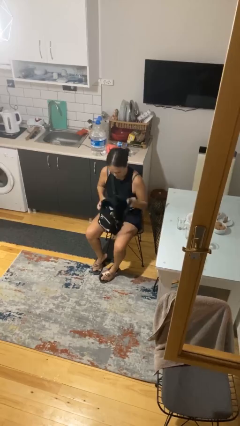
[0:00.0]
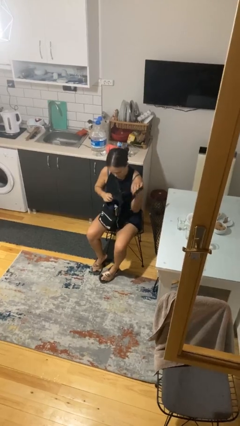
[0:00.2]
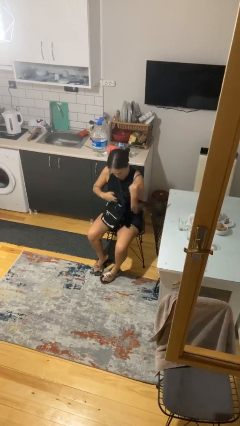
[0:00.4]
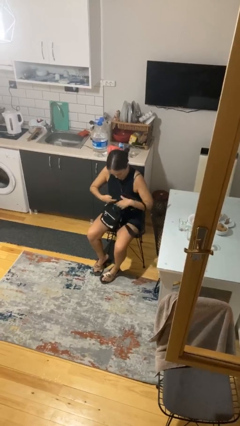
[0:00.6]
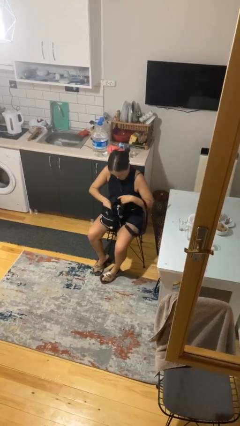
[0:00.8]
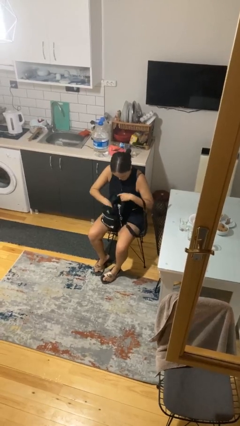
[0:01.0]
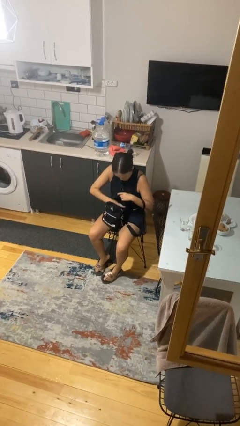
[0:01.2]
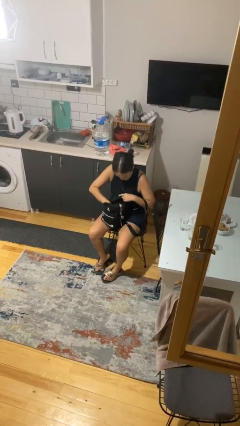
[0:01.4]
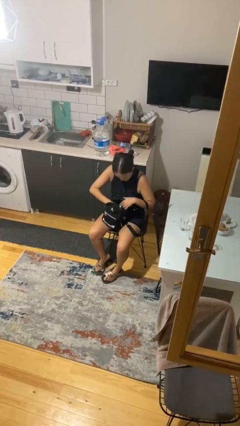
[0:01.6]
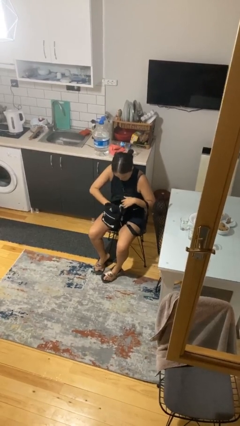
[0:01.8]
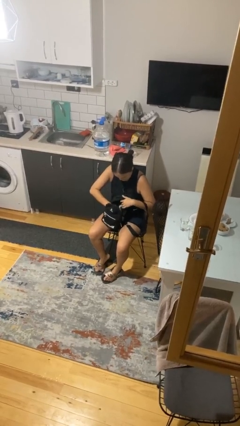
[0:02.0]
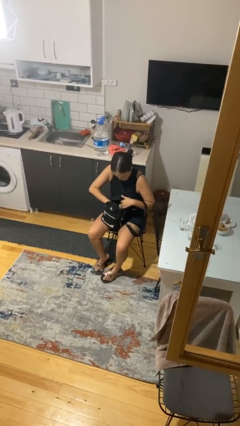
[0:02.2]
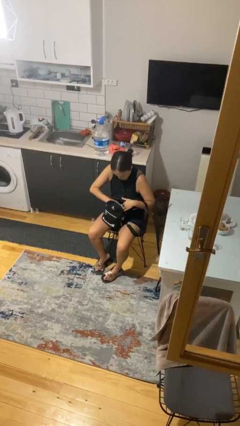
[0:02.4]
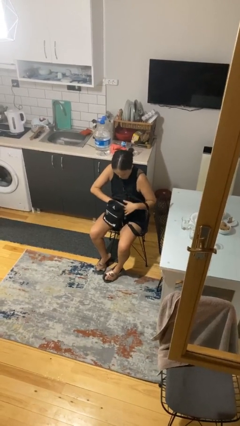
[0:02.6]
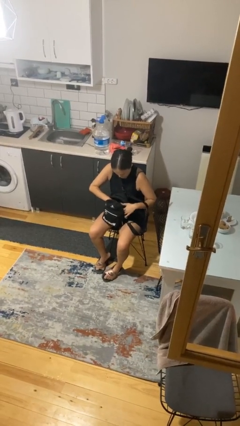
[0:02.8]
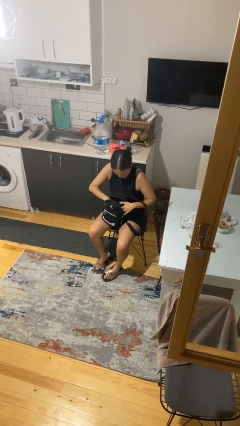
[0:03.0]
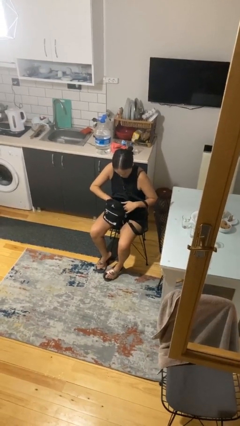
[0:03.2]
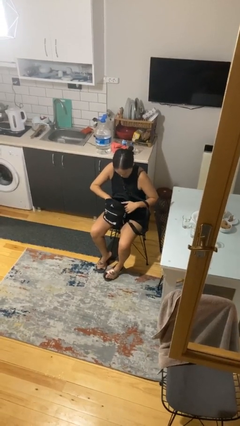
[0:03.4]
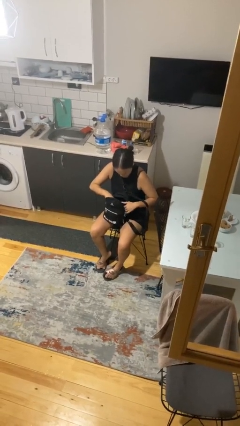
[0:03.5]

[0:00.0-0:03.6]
person searches in backpack

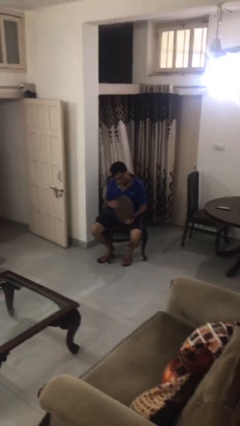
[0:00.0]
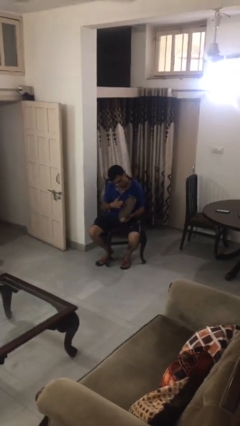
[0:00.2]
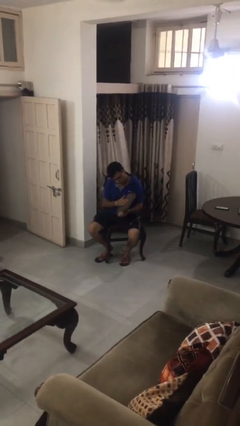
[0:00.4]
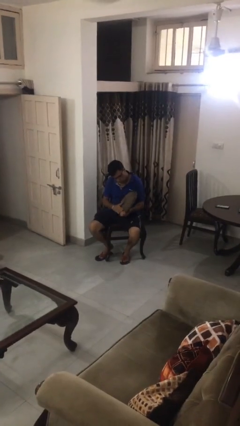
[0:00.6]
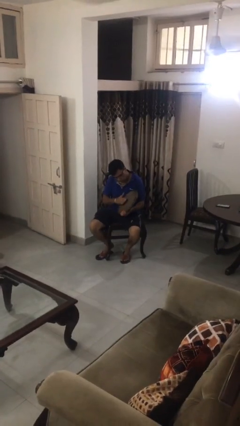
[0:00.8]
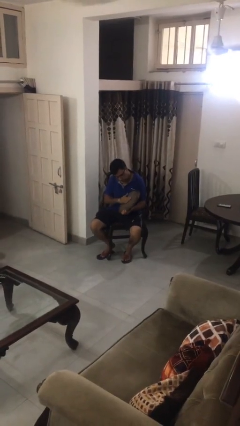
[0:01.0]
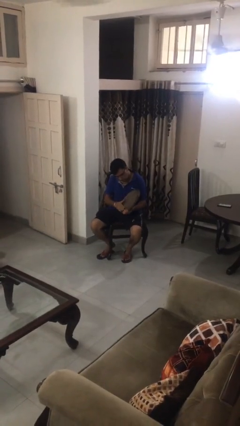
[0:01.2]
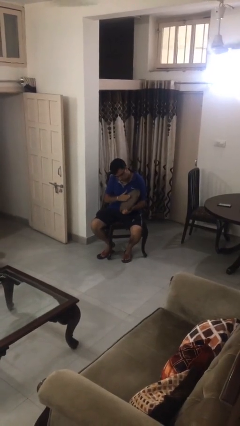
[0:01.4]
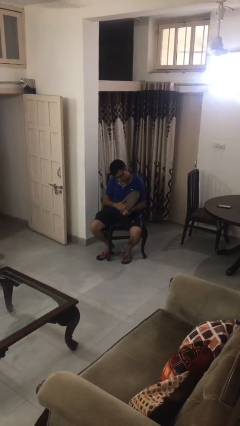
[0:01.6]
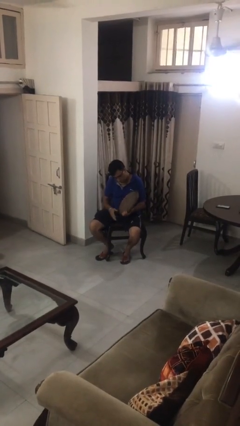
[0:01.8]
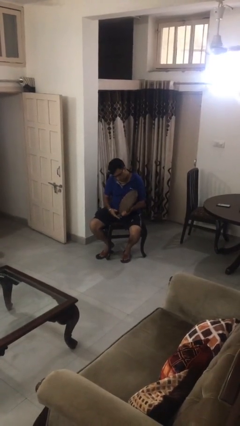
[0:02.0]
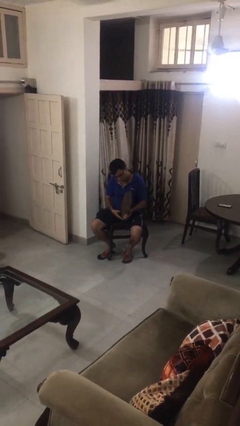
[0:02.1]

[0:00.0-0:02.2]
person waves hand over object

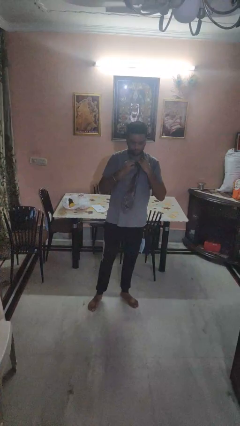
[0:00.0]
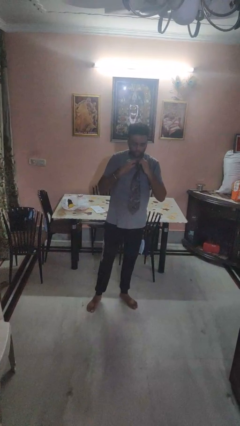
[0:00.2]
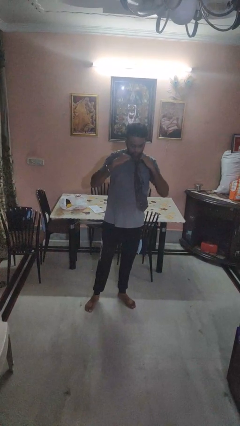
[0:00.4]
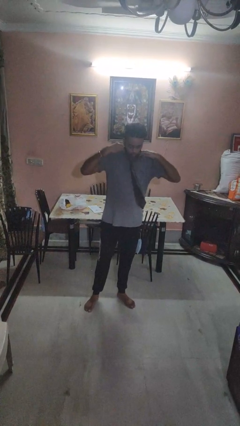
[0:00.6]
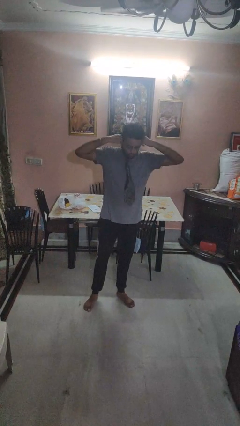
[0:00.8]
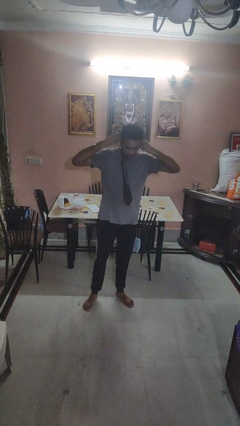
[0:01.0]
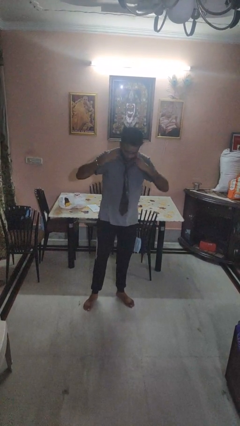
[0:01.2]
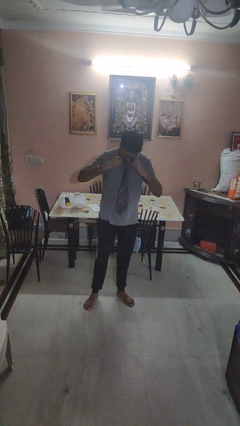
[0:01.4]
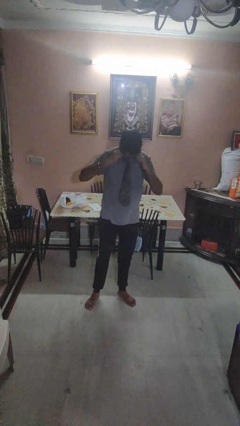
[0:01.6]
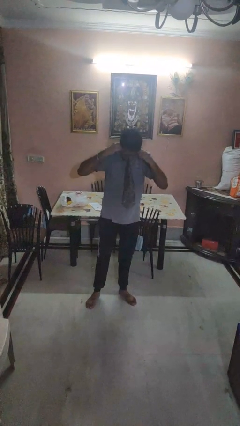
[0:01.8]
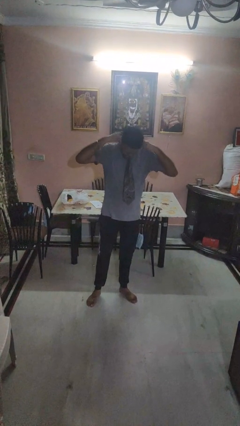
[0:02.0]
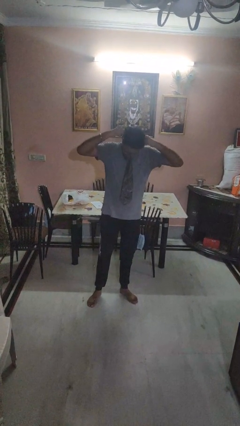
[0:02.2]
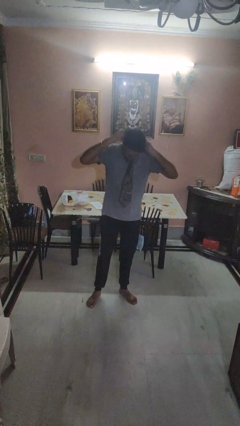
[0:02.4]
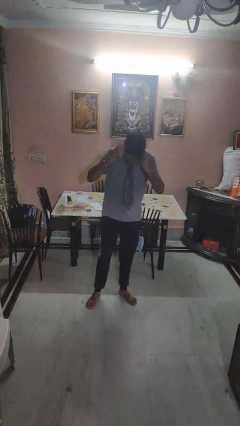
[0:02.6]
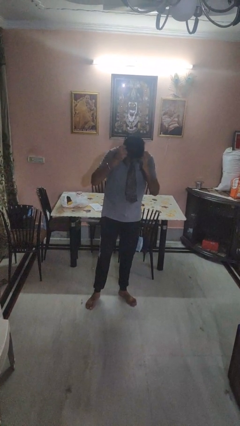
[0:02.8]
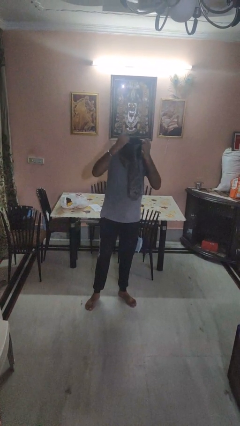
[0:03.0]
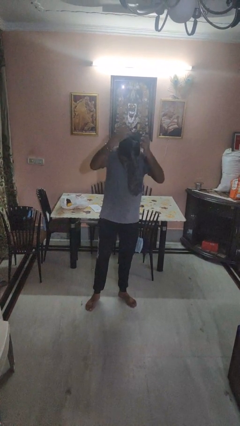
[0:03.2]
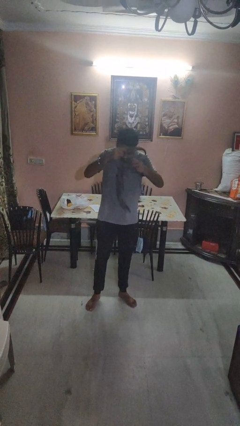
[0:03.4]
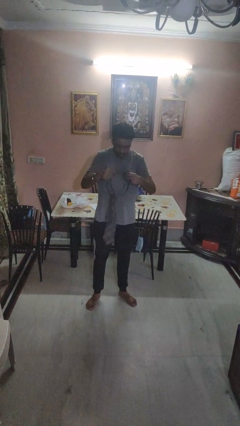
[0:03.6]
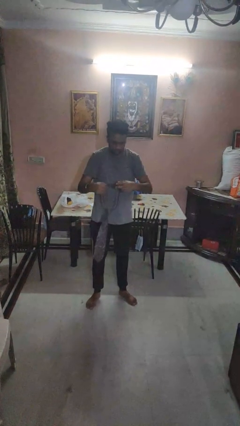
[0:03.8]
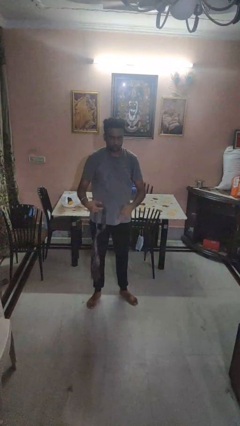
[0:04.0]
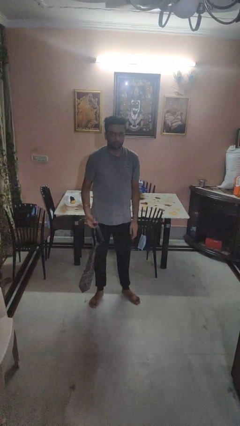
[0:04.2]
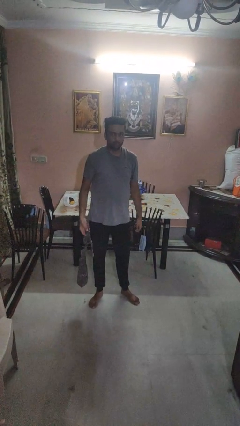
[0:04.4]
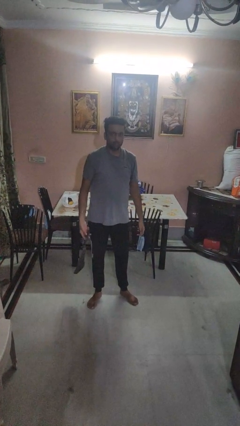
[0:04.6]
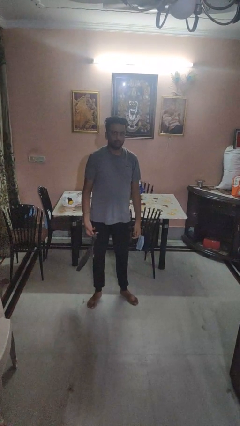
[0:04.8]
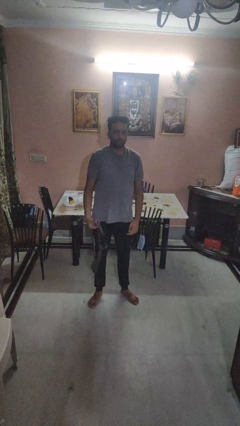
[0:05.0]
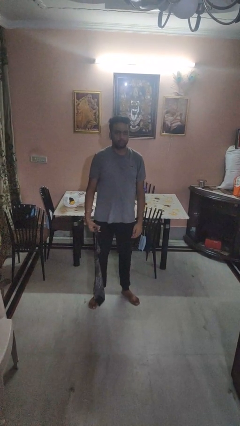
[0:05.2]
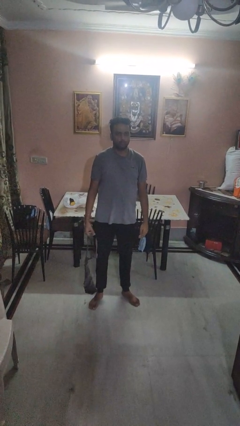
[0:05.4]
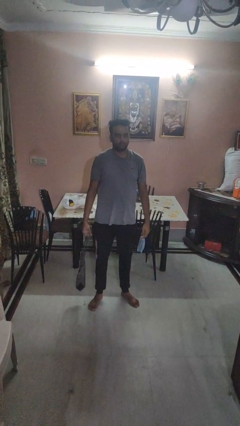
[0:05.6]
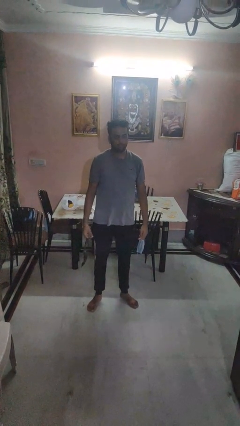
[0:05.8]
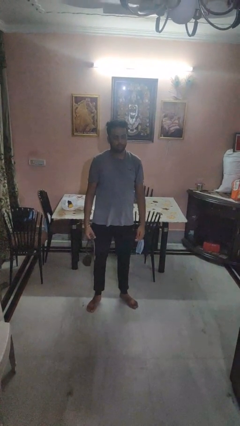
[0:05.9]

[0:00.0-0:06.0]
person takes off necktie

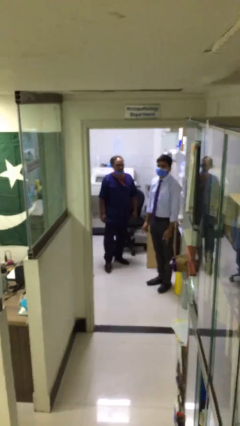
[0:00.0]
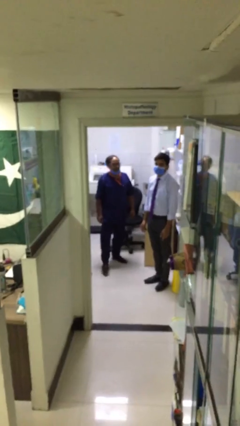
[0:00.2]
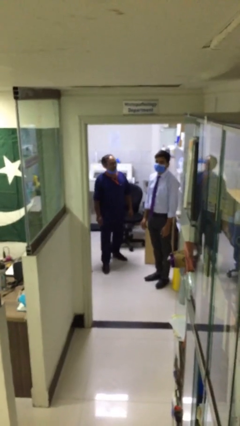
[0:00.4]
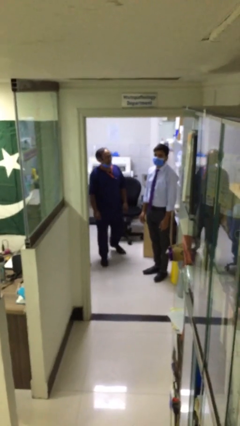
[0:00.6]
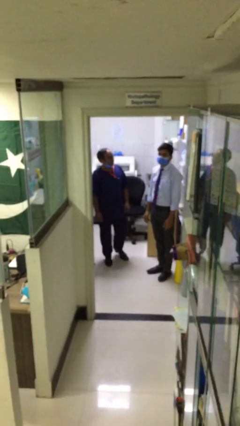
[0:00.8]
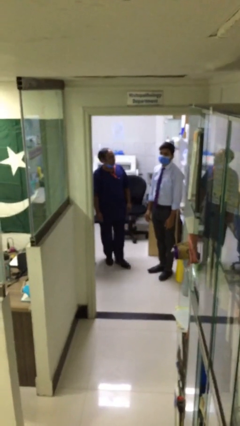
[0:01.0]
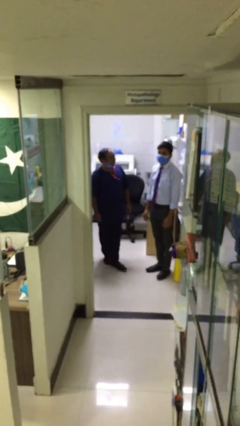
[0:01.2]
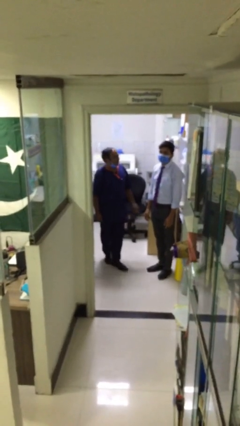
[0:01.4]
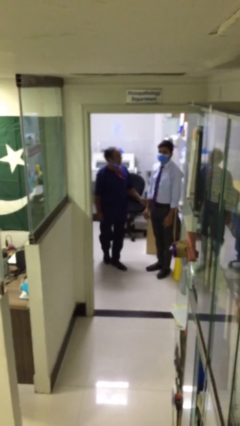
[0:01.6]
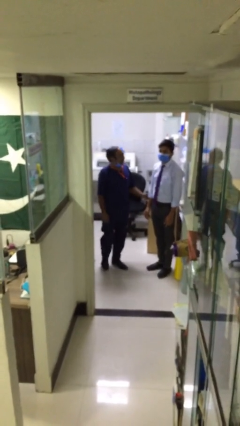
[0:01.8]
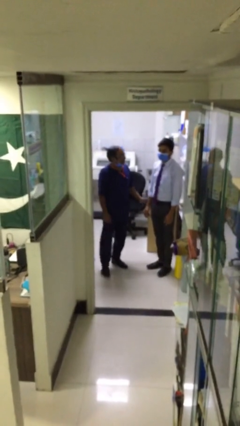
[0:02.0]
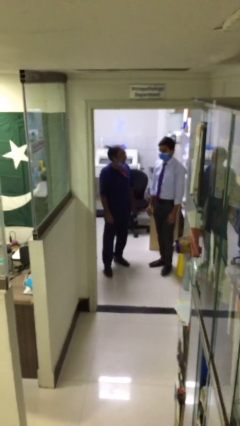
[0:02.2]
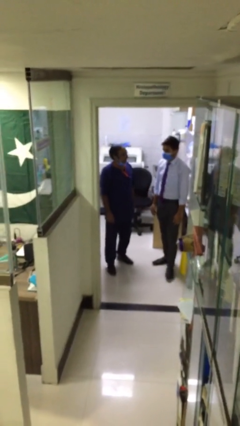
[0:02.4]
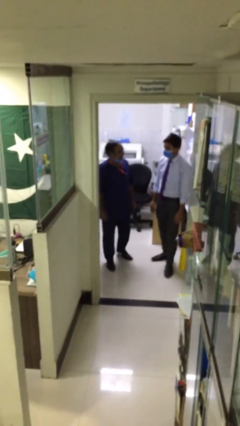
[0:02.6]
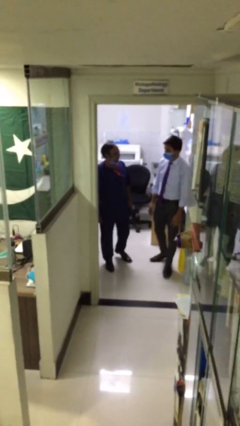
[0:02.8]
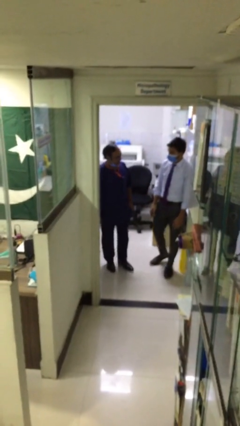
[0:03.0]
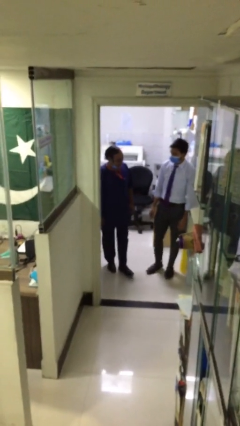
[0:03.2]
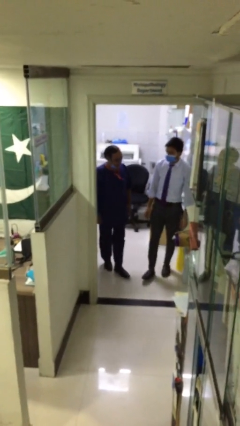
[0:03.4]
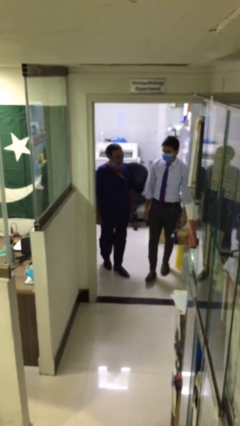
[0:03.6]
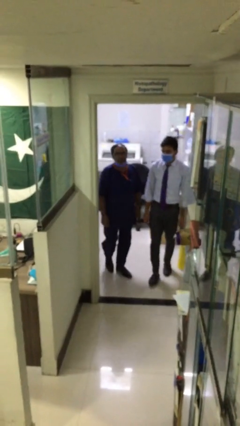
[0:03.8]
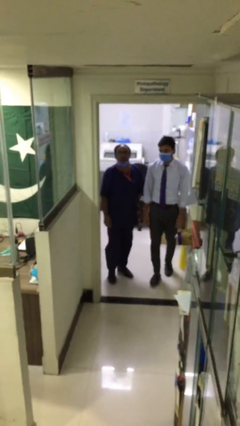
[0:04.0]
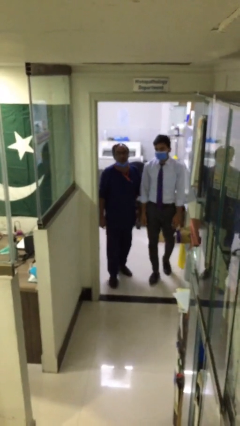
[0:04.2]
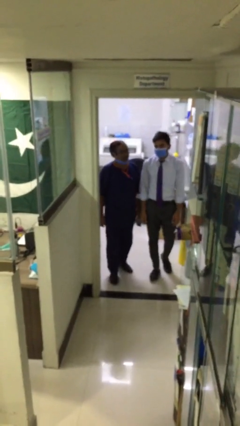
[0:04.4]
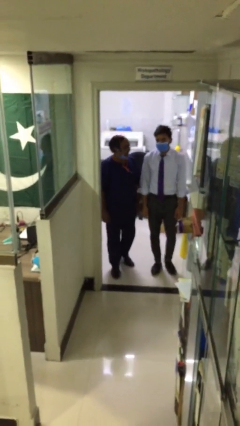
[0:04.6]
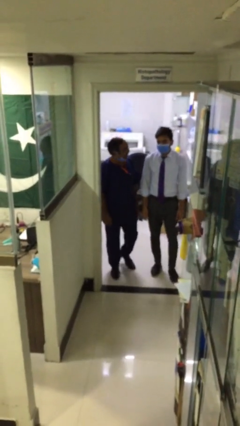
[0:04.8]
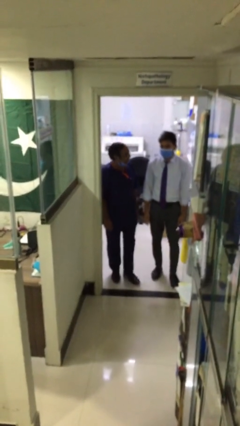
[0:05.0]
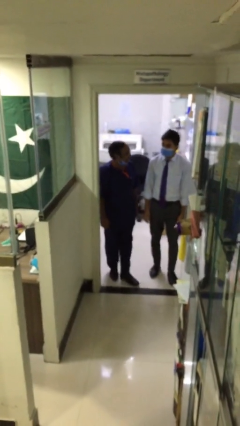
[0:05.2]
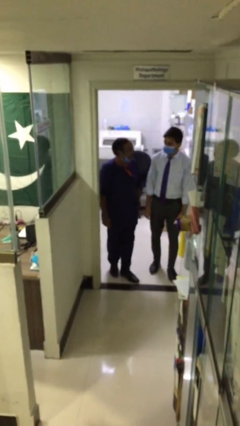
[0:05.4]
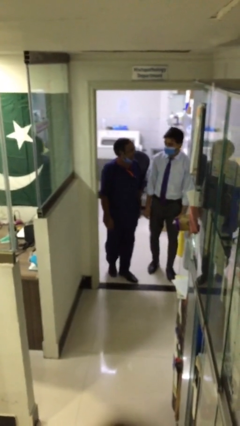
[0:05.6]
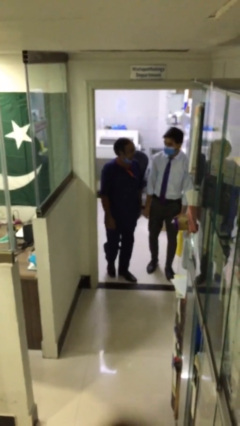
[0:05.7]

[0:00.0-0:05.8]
person talks to person
